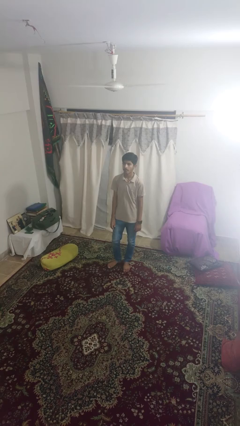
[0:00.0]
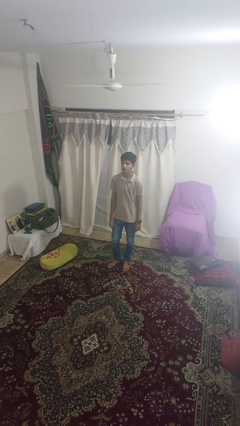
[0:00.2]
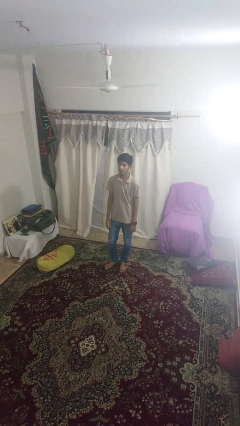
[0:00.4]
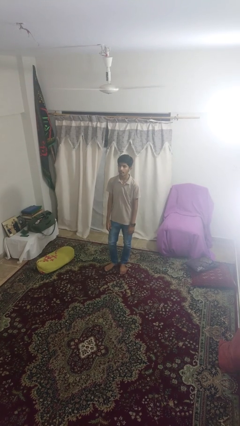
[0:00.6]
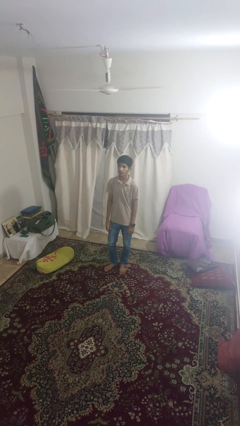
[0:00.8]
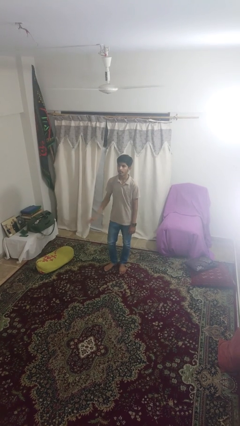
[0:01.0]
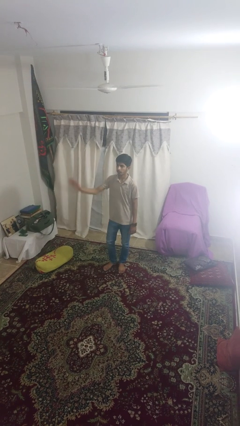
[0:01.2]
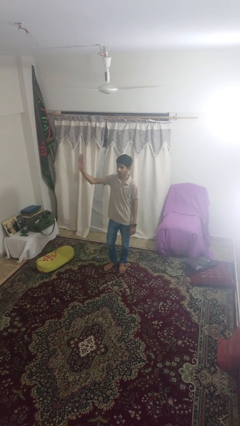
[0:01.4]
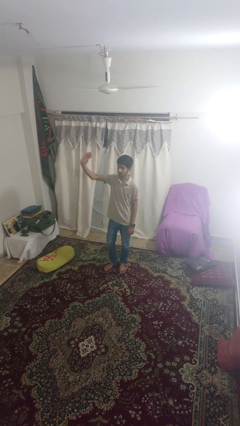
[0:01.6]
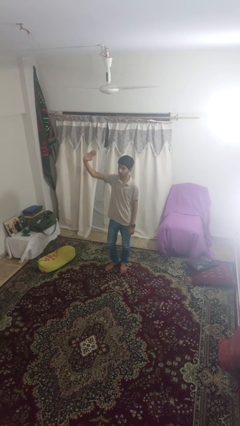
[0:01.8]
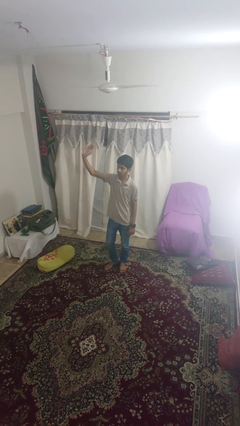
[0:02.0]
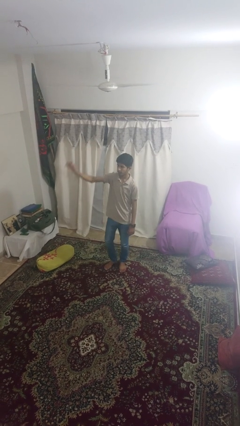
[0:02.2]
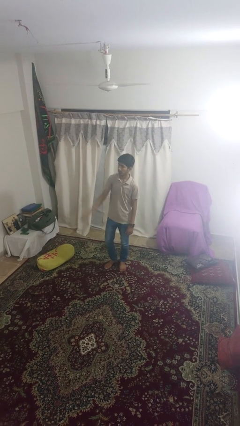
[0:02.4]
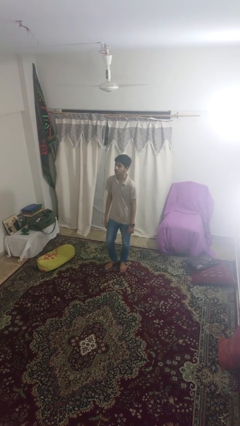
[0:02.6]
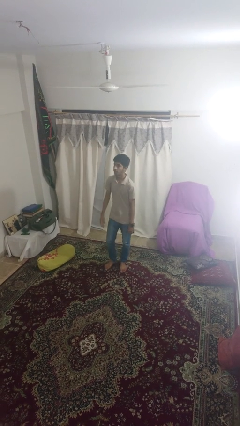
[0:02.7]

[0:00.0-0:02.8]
person waves at person

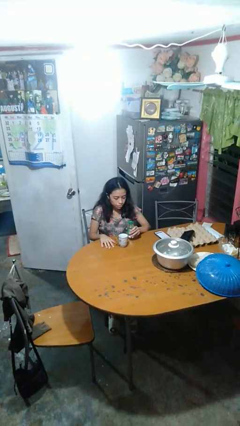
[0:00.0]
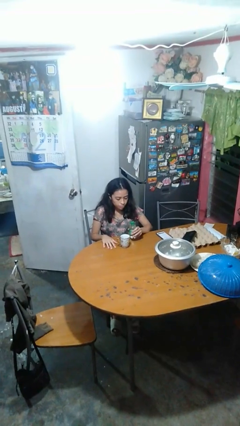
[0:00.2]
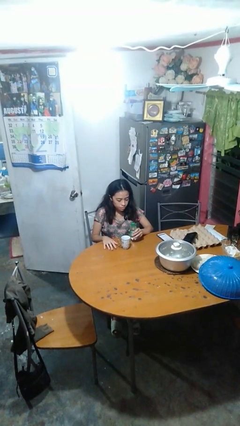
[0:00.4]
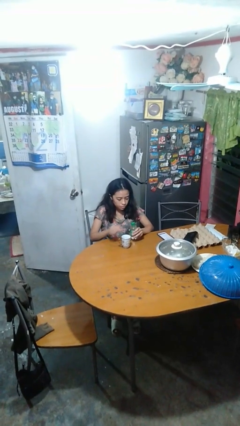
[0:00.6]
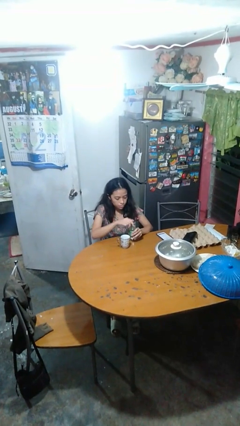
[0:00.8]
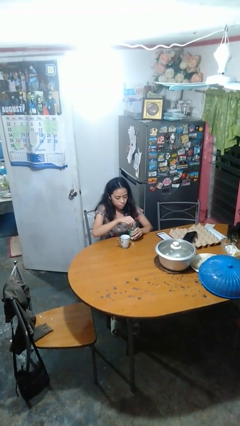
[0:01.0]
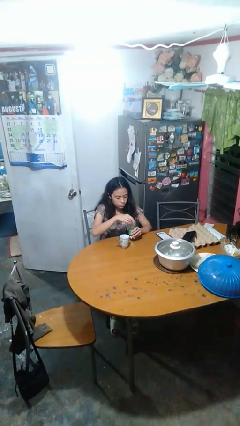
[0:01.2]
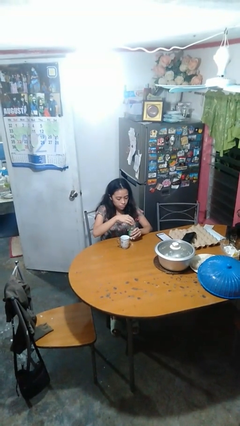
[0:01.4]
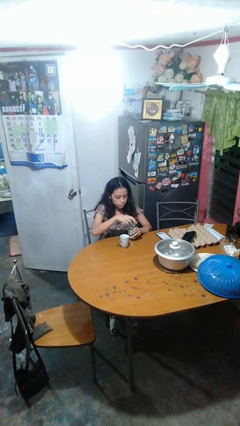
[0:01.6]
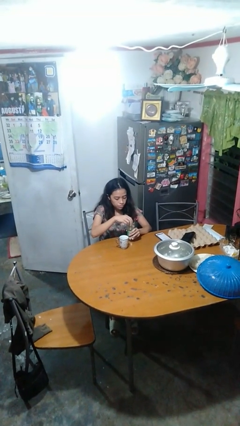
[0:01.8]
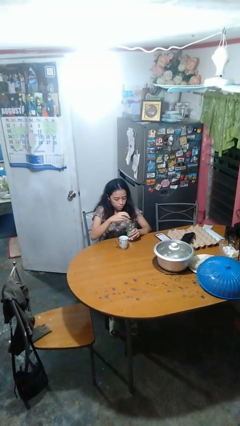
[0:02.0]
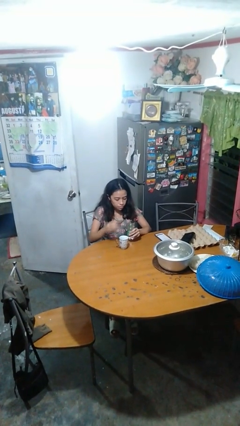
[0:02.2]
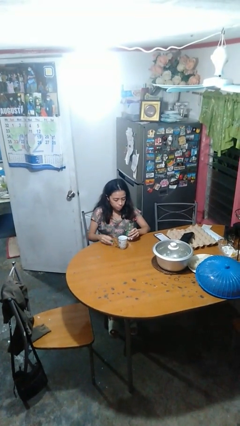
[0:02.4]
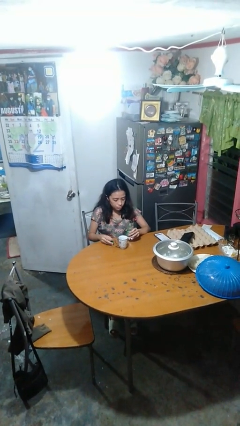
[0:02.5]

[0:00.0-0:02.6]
person unscrews lid from bottle

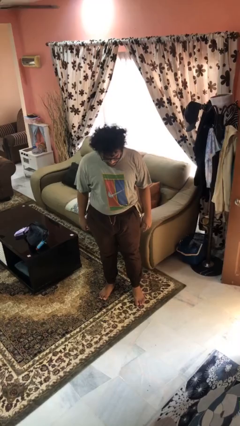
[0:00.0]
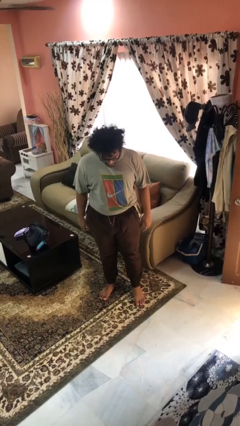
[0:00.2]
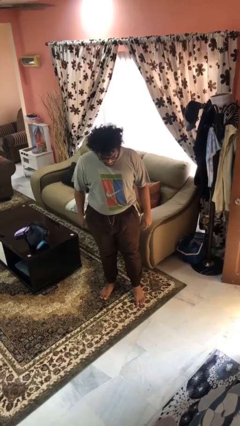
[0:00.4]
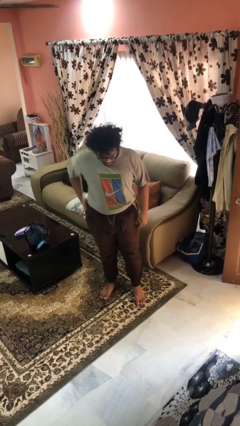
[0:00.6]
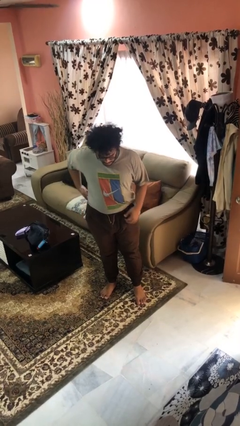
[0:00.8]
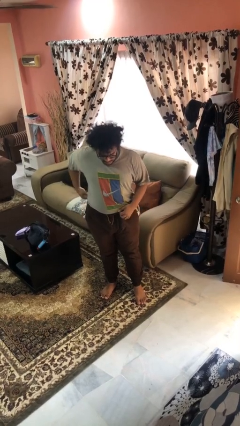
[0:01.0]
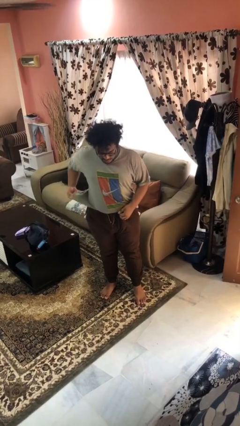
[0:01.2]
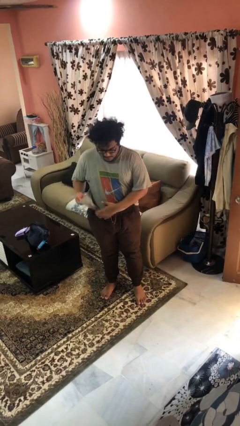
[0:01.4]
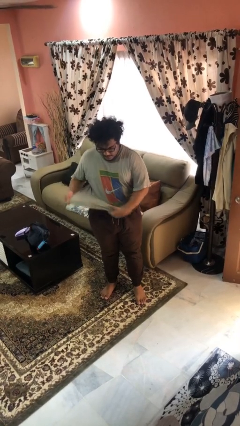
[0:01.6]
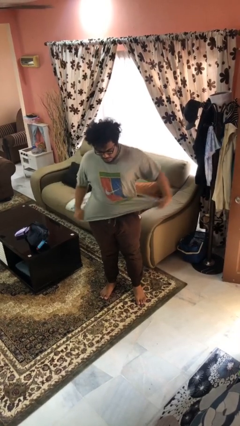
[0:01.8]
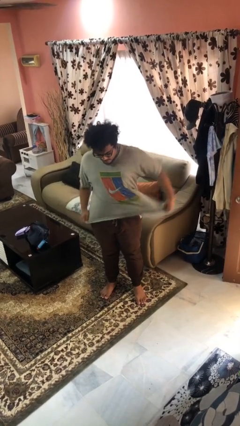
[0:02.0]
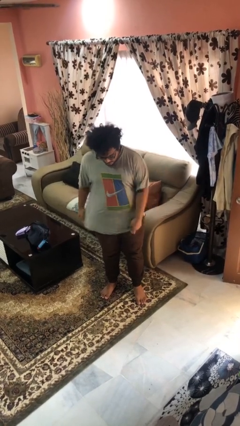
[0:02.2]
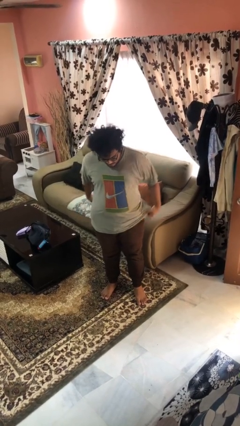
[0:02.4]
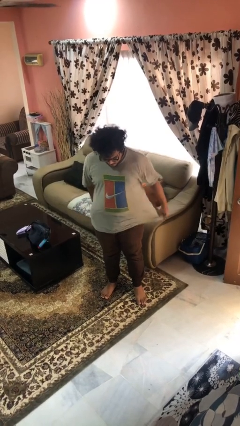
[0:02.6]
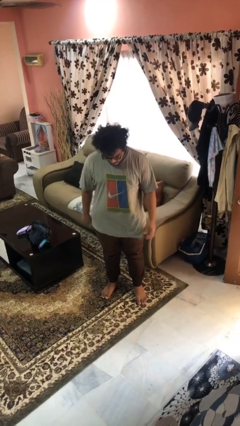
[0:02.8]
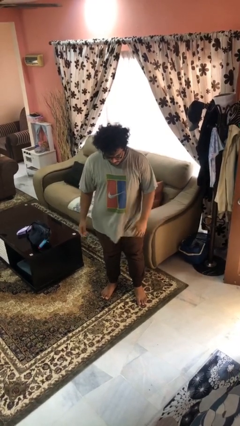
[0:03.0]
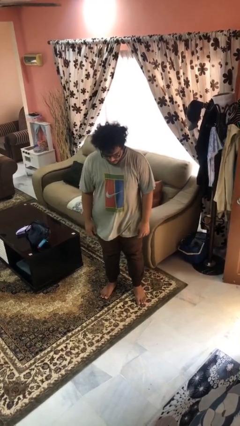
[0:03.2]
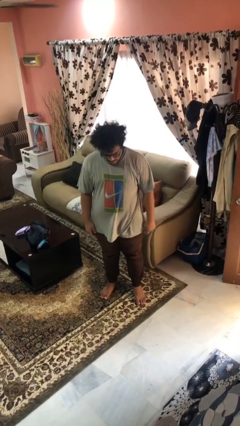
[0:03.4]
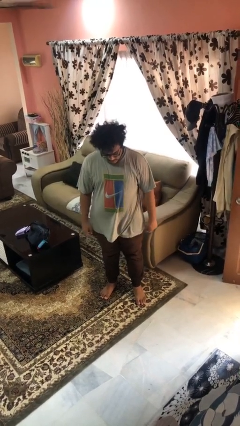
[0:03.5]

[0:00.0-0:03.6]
person untucks shirt

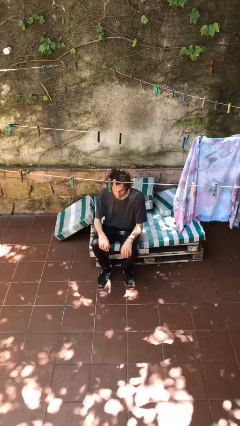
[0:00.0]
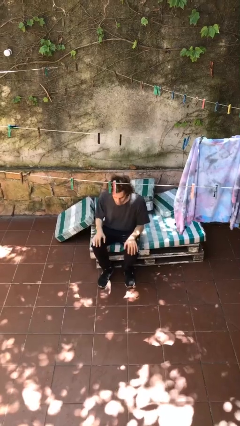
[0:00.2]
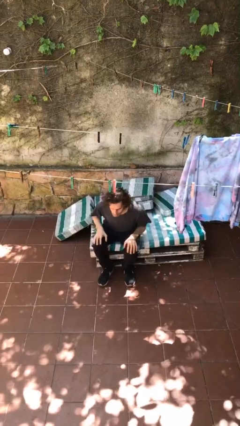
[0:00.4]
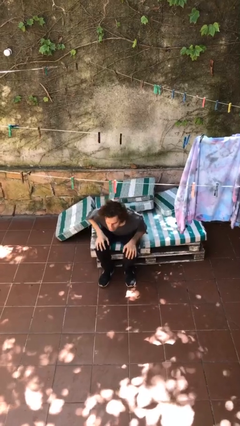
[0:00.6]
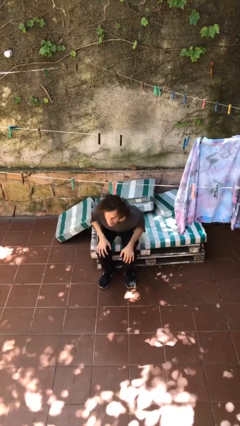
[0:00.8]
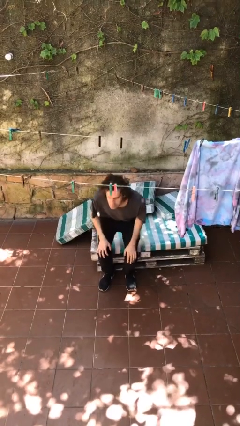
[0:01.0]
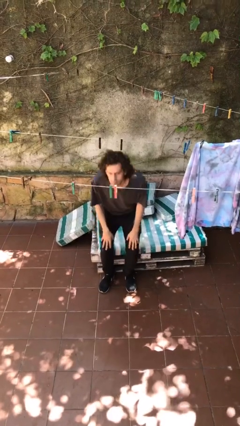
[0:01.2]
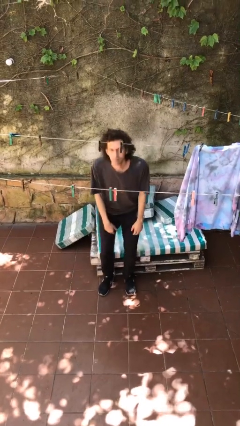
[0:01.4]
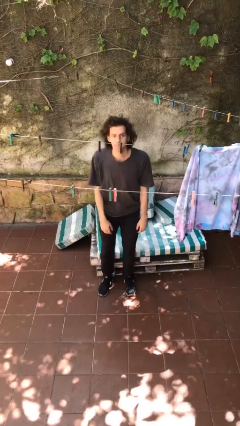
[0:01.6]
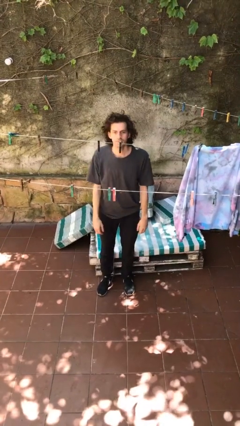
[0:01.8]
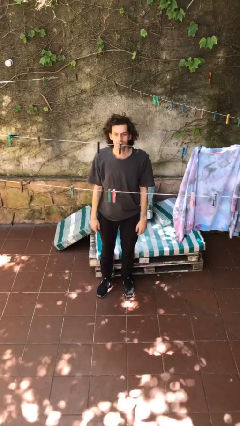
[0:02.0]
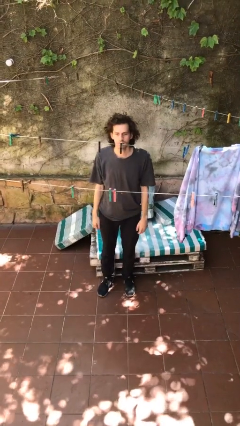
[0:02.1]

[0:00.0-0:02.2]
person stands up

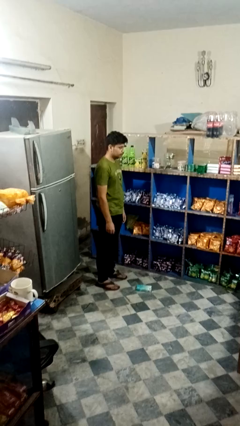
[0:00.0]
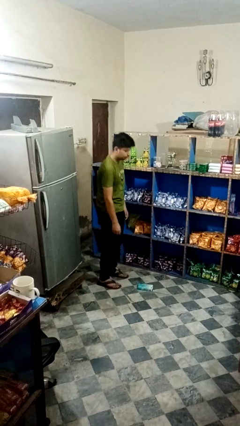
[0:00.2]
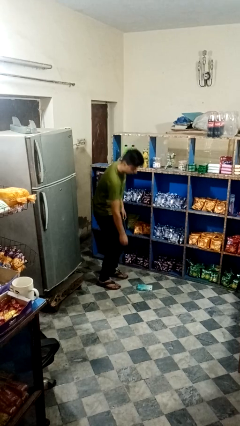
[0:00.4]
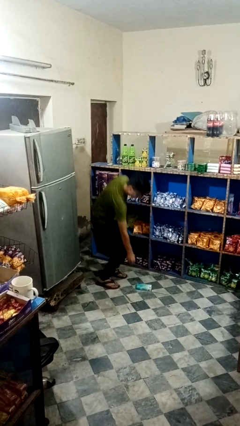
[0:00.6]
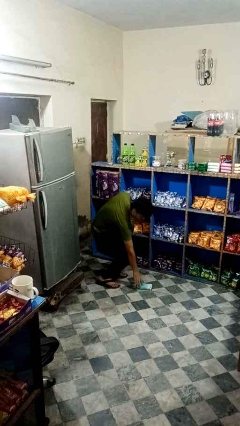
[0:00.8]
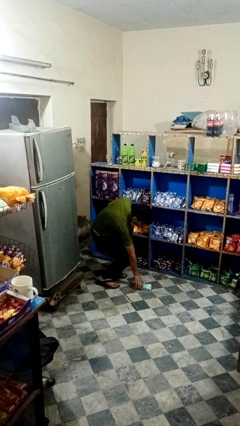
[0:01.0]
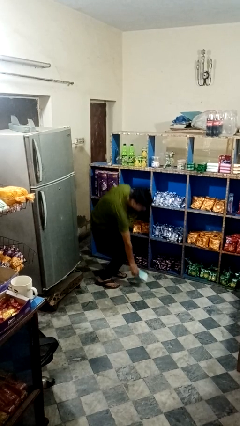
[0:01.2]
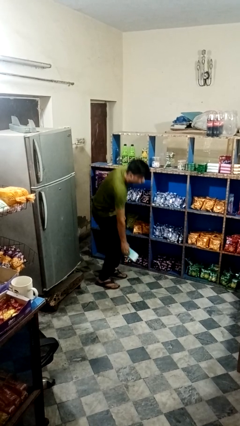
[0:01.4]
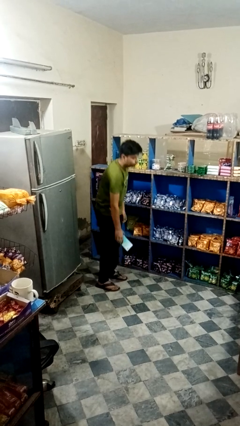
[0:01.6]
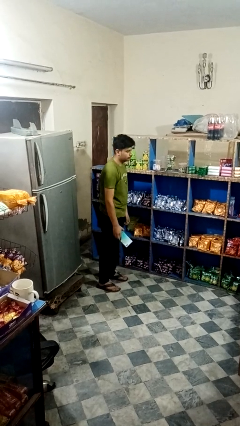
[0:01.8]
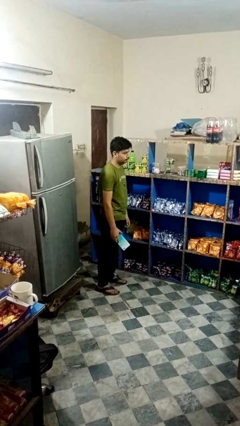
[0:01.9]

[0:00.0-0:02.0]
person picks up object from floor

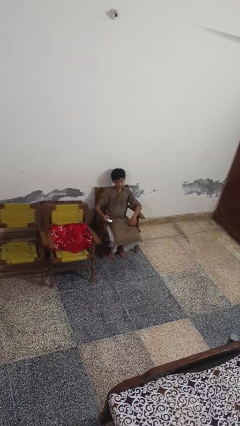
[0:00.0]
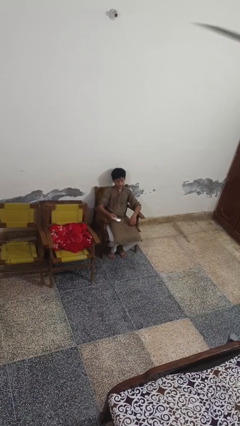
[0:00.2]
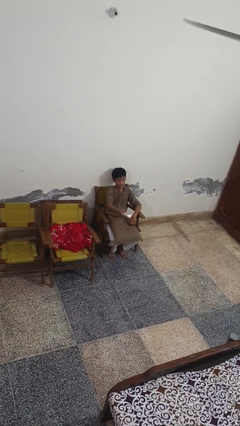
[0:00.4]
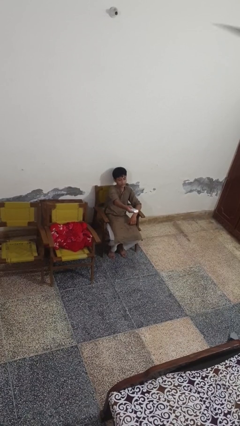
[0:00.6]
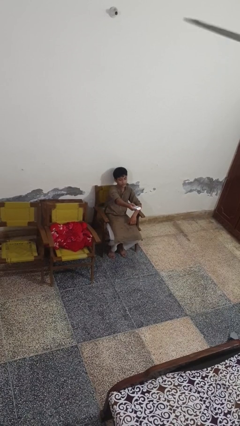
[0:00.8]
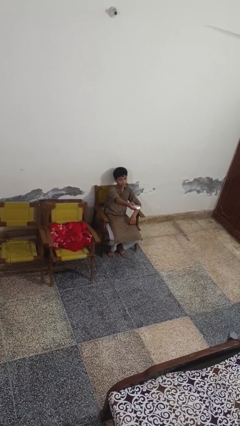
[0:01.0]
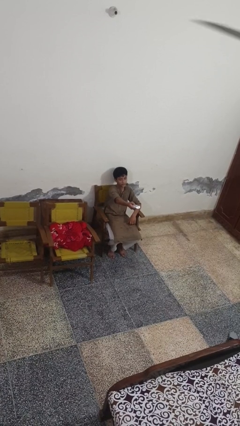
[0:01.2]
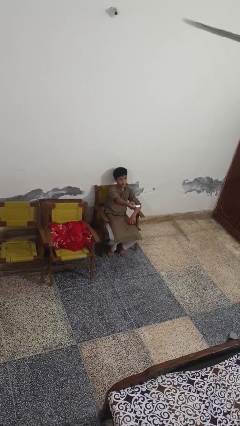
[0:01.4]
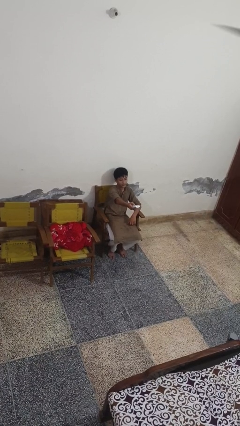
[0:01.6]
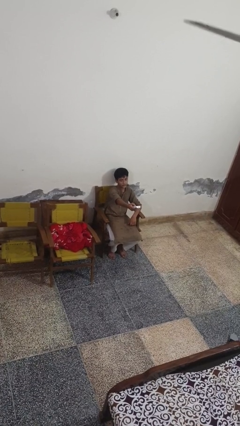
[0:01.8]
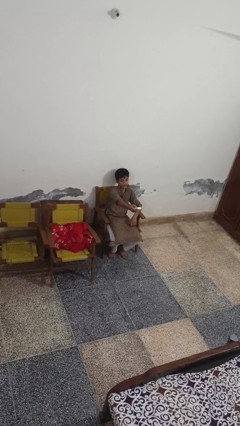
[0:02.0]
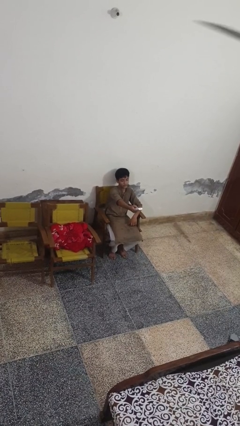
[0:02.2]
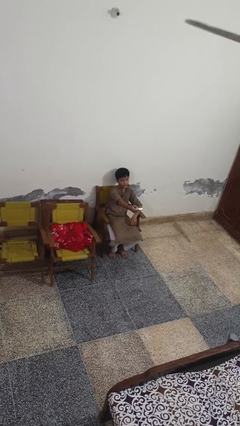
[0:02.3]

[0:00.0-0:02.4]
person uses television remote

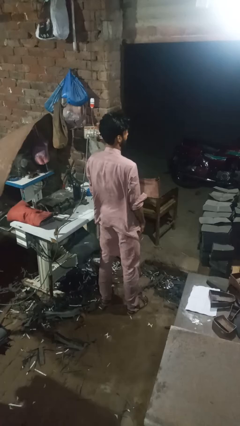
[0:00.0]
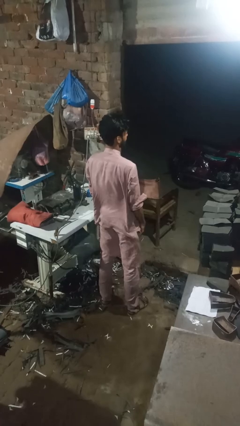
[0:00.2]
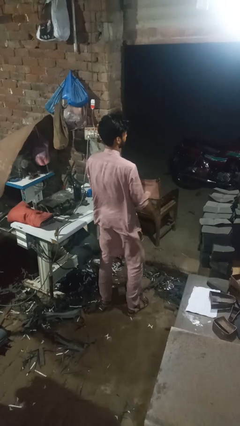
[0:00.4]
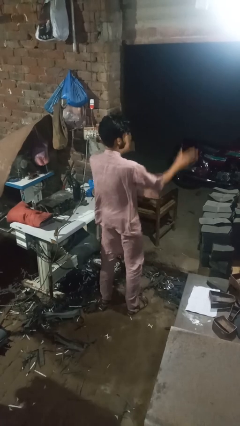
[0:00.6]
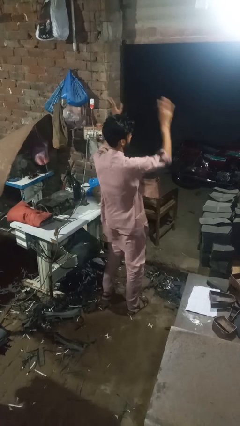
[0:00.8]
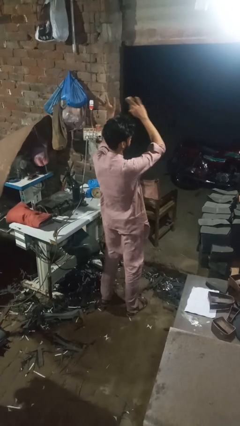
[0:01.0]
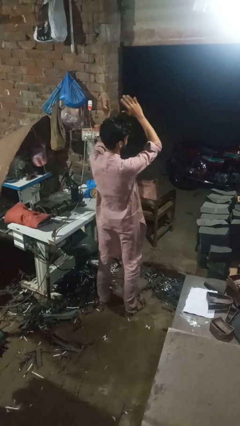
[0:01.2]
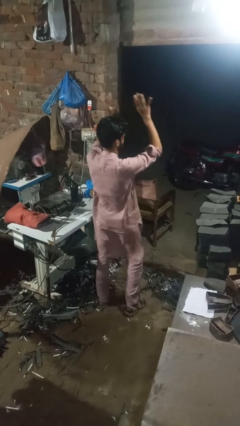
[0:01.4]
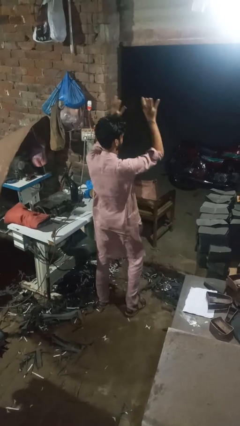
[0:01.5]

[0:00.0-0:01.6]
person dances in place
